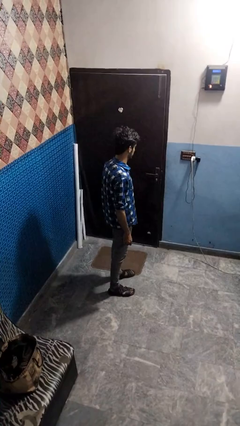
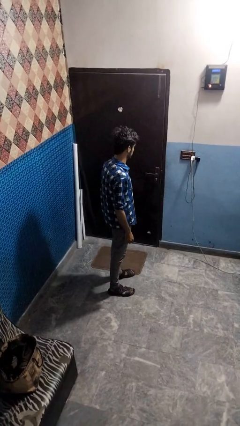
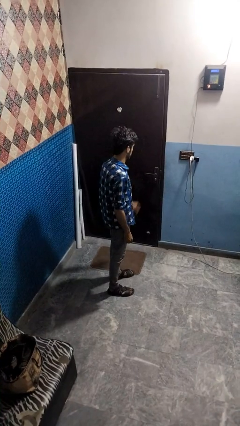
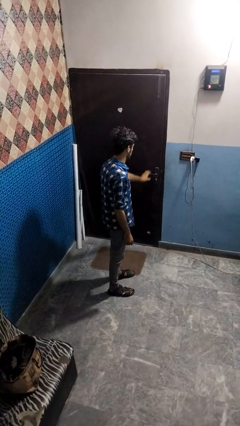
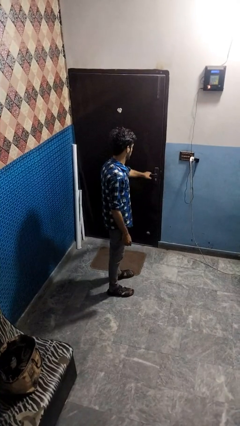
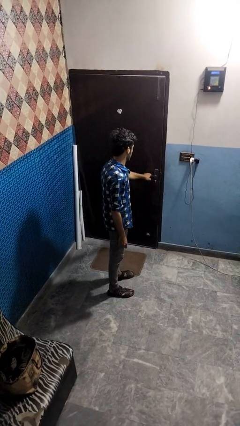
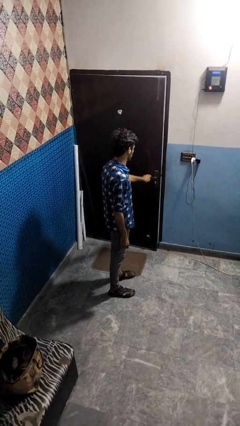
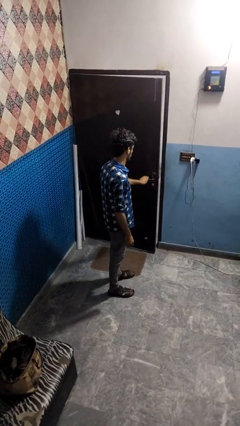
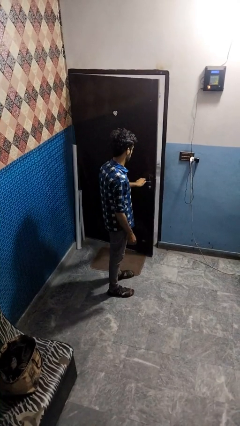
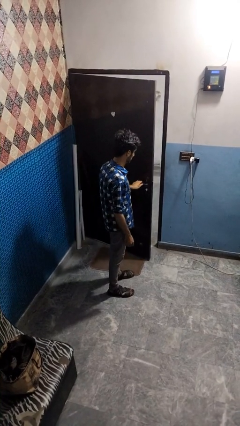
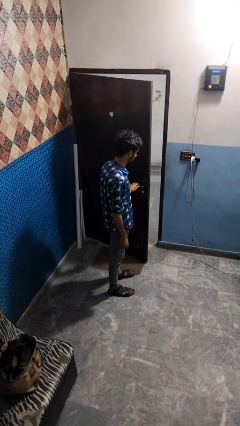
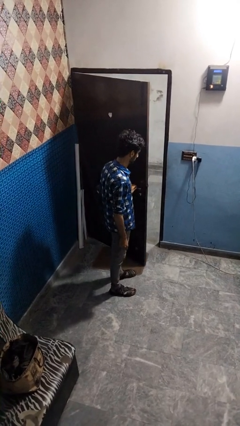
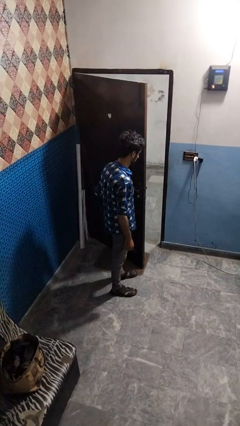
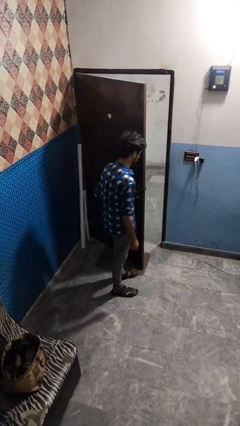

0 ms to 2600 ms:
person opens facility door

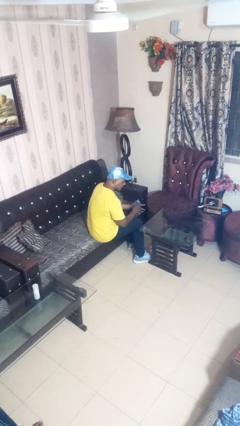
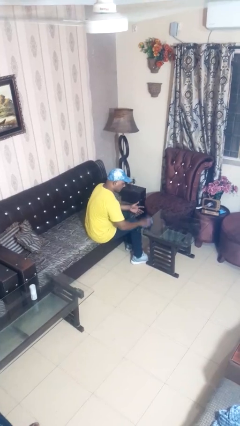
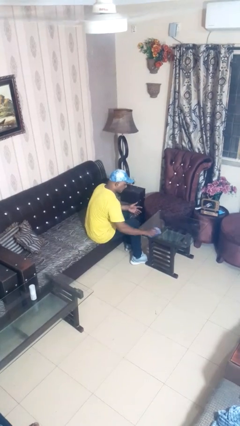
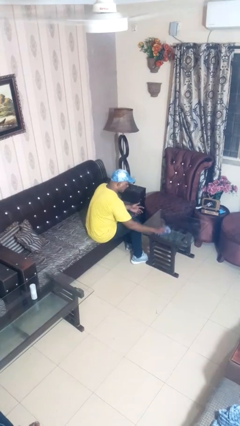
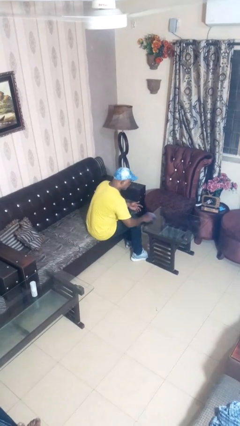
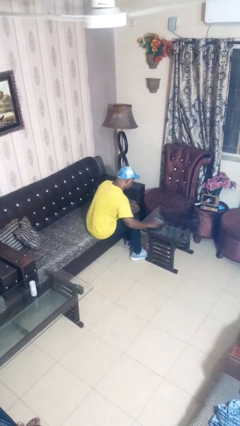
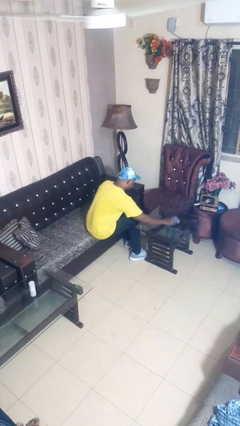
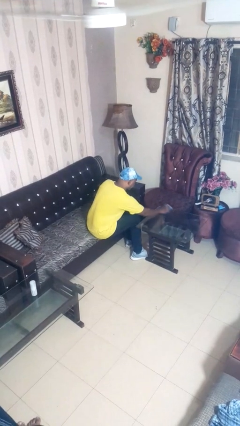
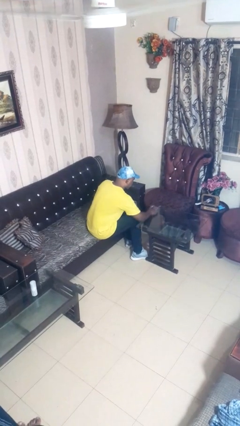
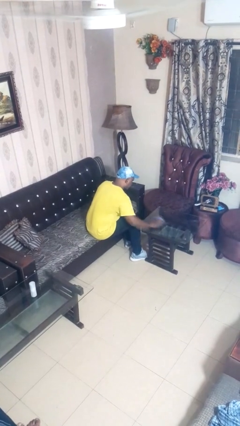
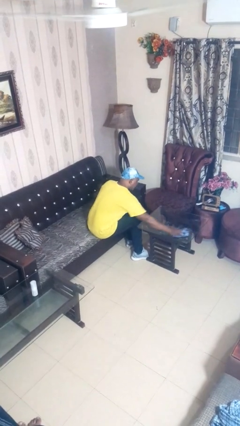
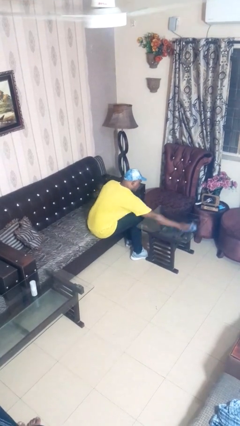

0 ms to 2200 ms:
person cleans table with rag

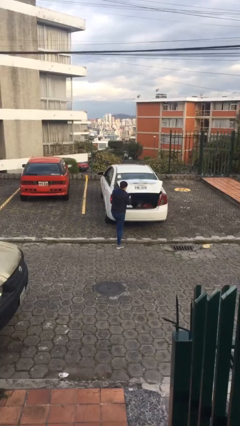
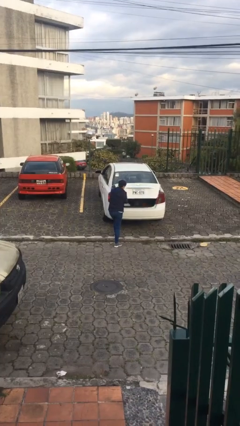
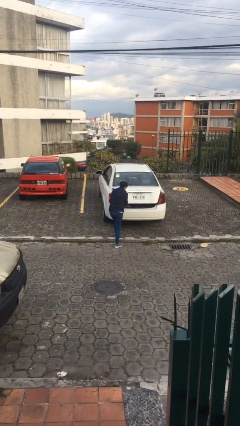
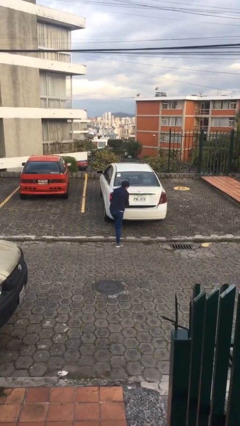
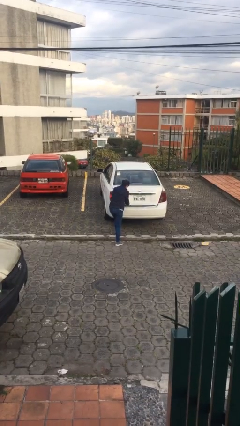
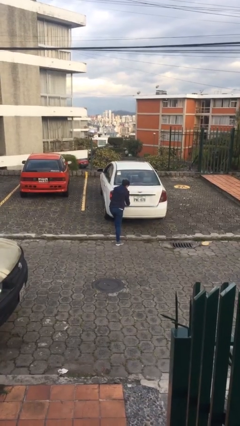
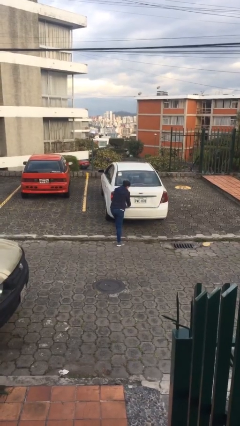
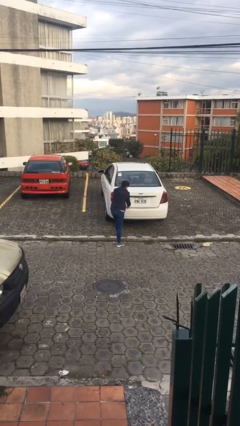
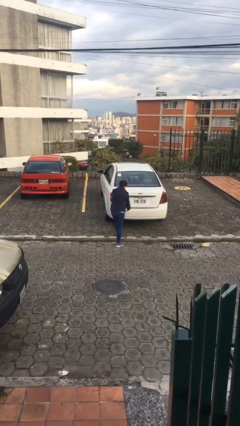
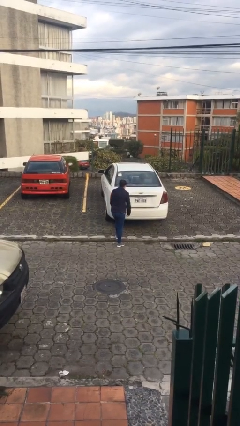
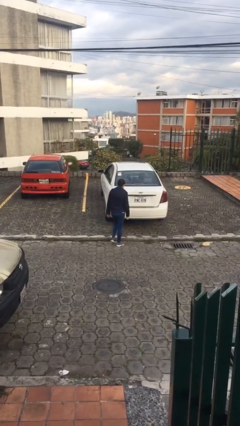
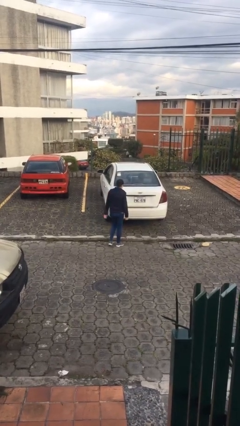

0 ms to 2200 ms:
person closes car trunk

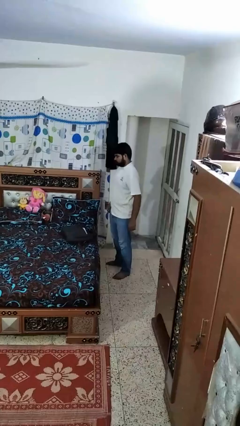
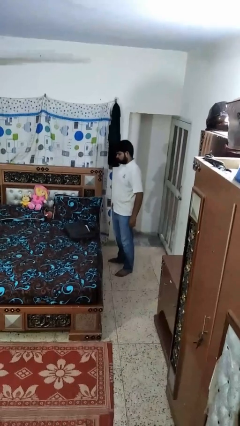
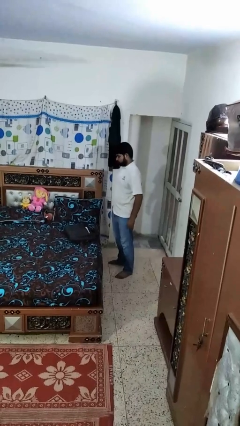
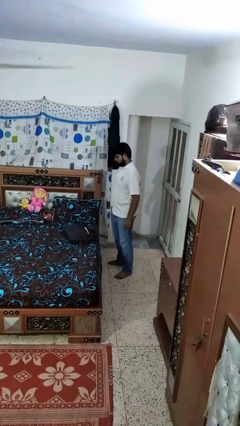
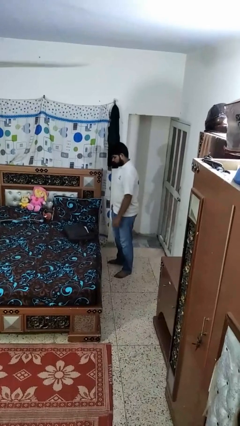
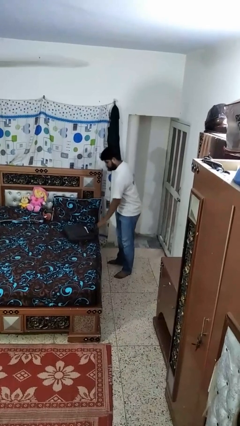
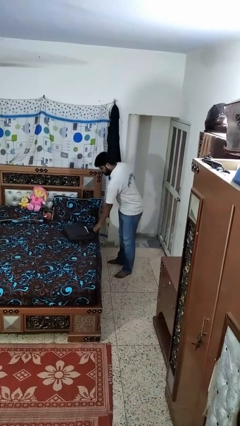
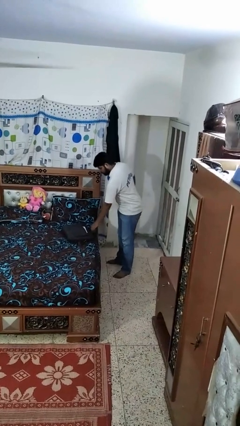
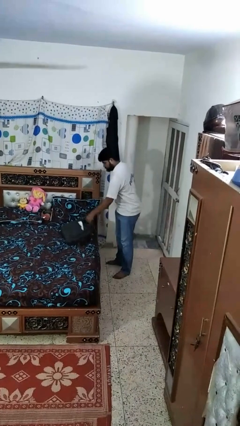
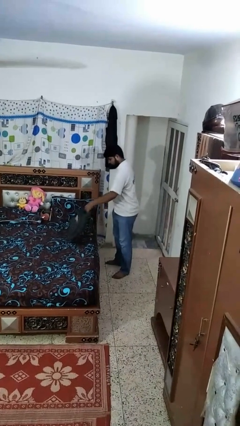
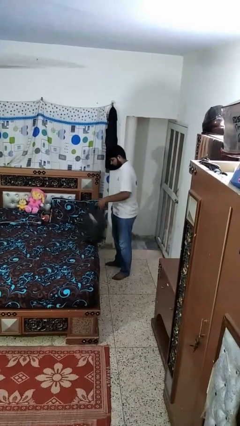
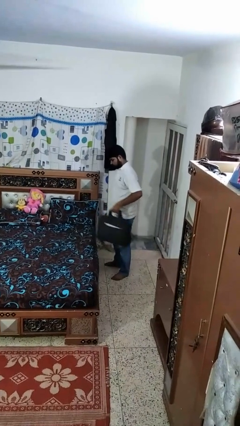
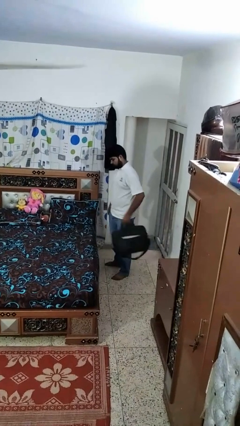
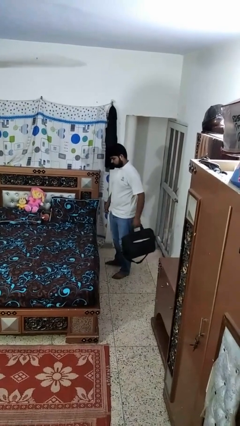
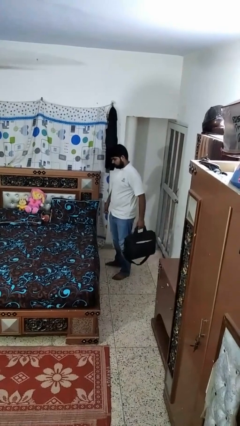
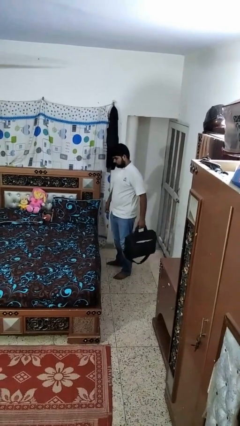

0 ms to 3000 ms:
person picks up object from bed

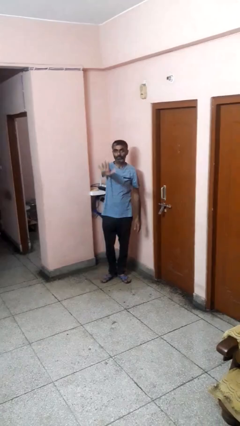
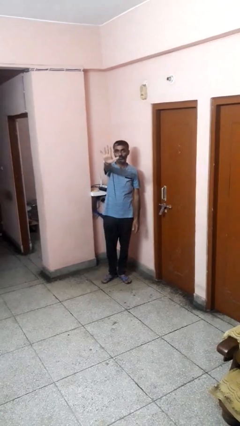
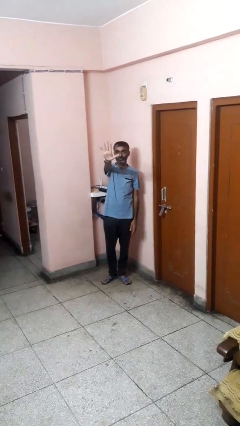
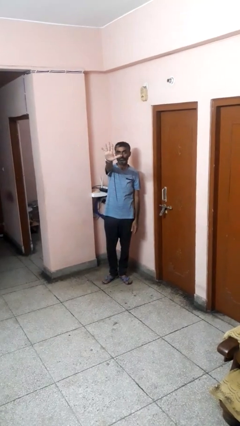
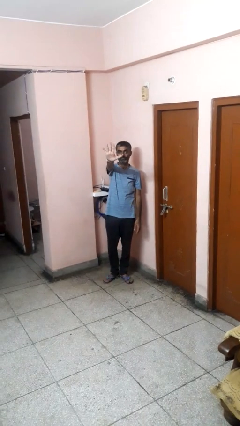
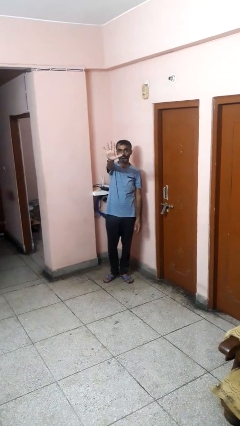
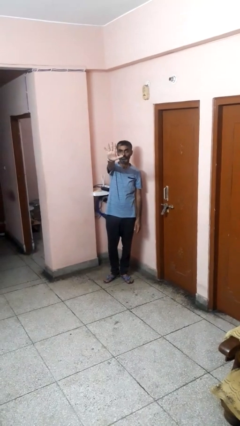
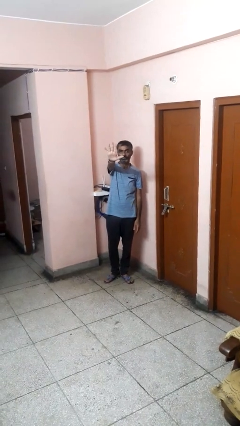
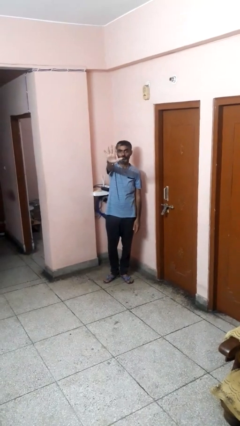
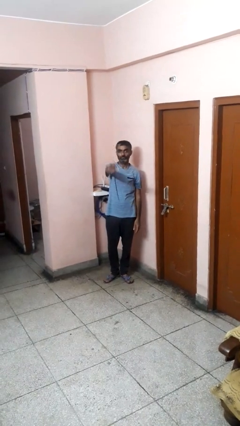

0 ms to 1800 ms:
person gestures number five

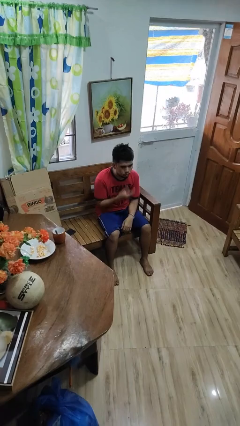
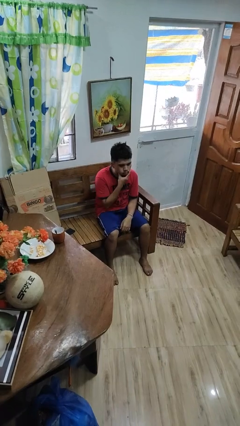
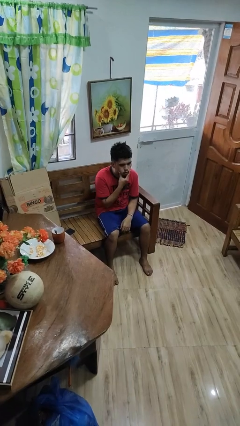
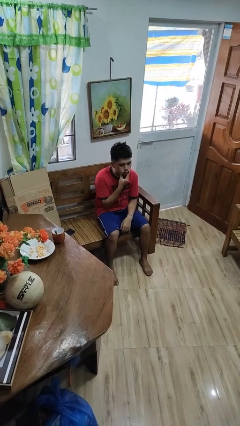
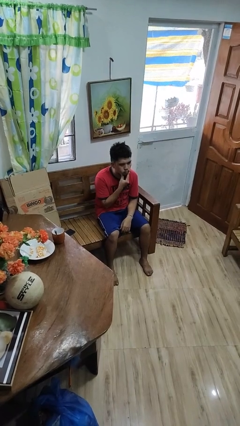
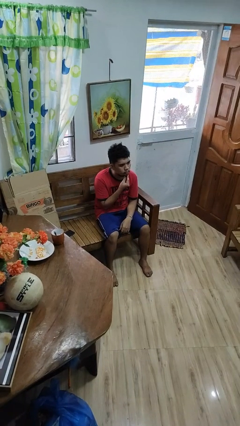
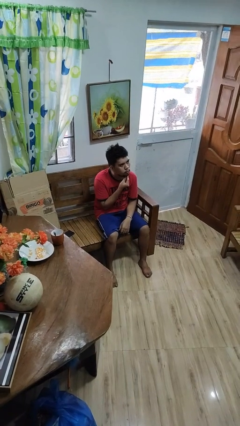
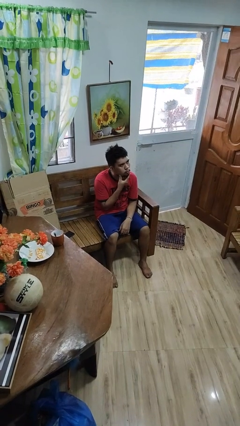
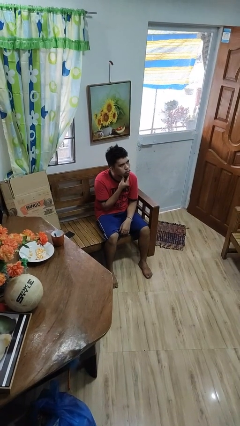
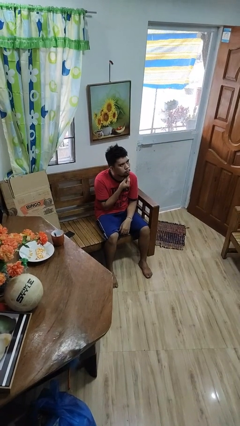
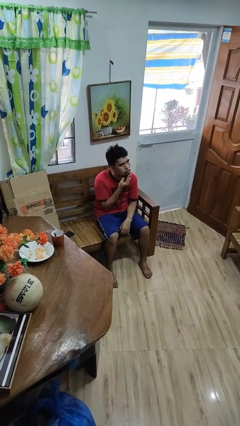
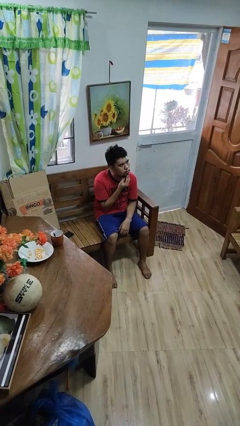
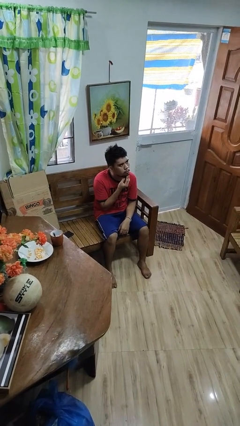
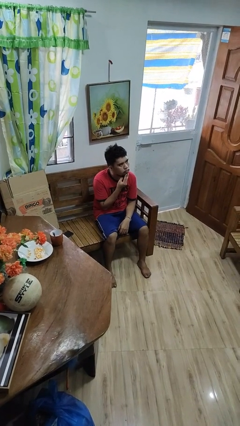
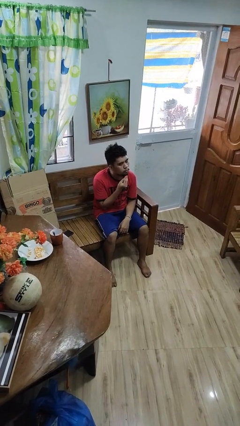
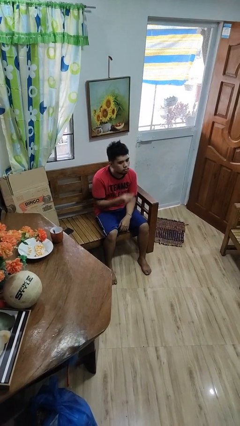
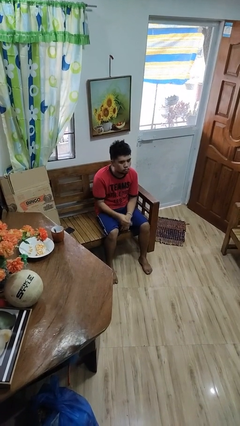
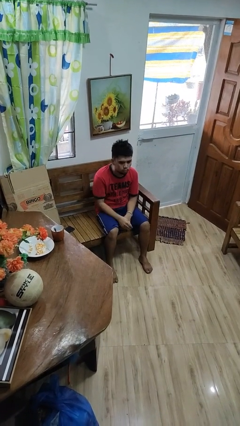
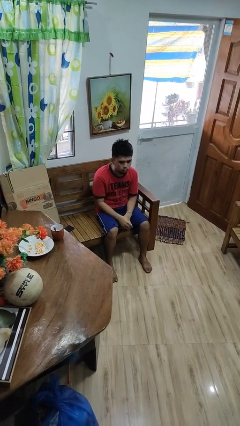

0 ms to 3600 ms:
person strokes chin

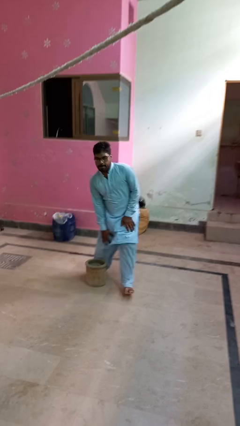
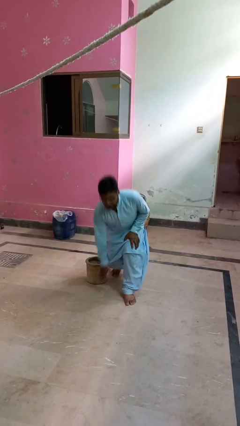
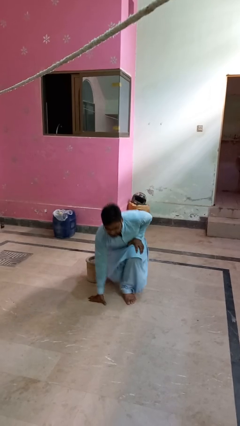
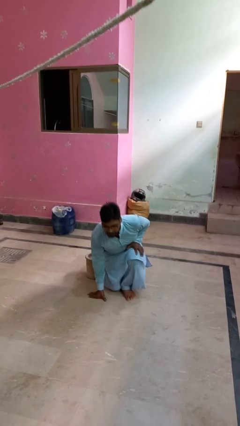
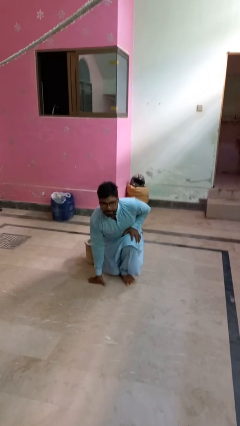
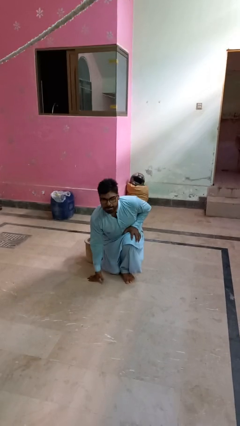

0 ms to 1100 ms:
person trips on object on floor

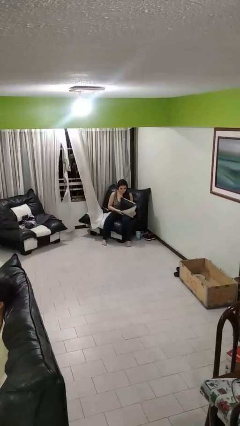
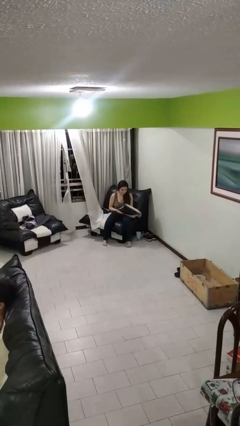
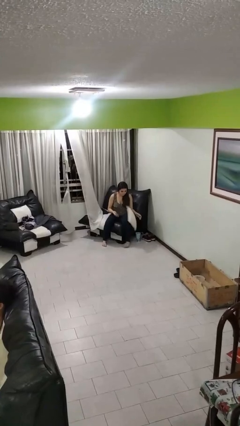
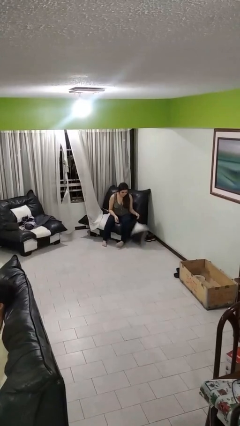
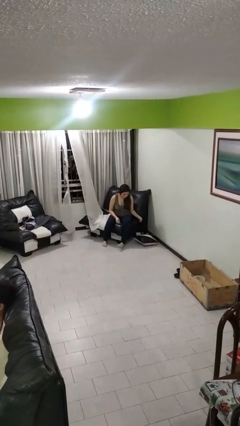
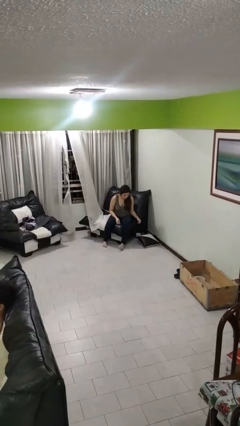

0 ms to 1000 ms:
person drops object
